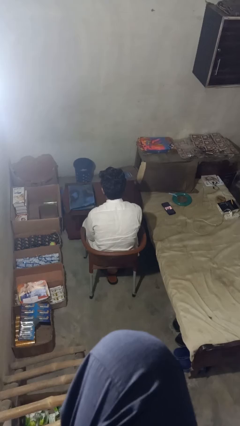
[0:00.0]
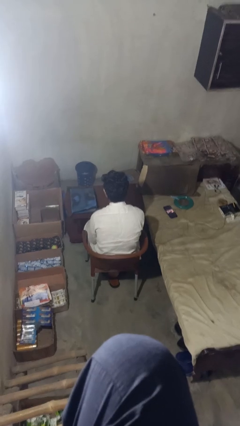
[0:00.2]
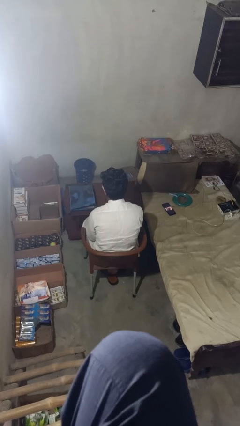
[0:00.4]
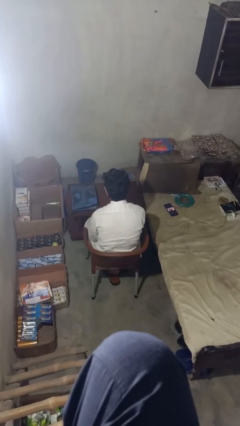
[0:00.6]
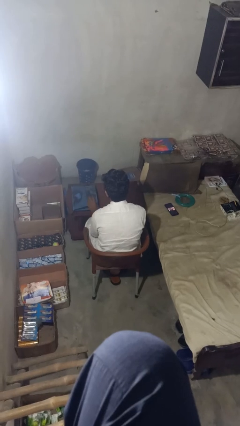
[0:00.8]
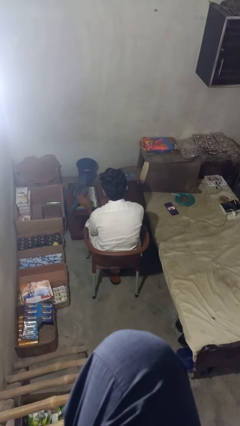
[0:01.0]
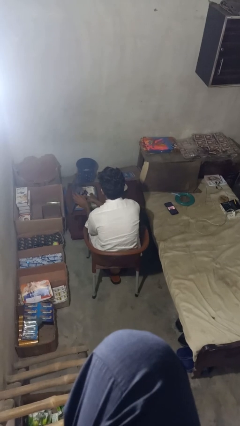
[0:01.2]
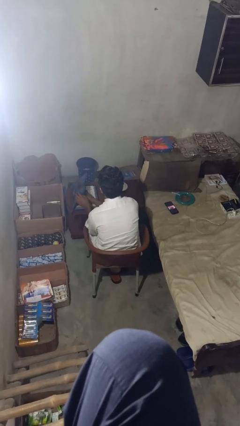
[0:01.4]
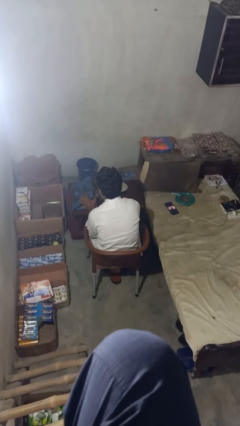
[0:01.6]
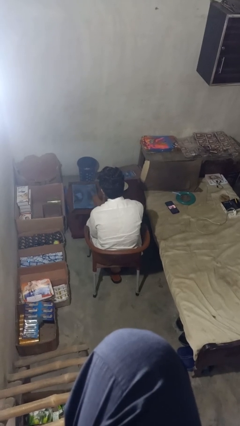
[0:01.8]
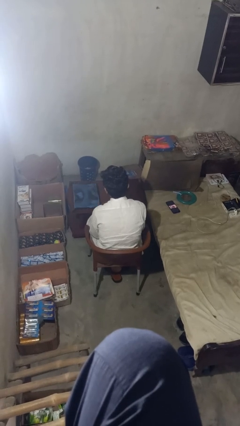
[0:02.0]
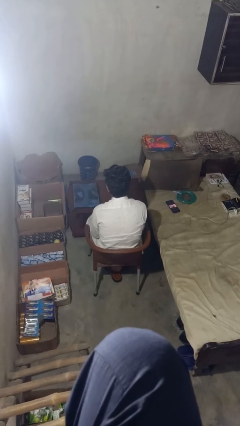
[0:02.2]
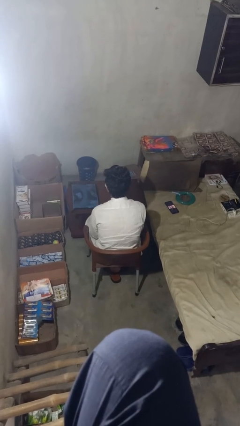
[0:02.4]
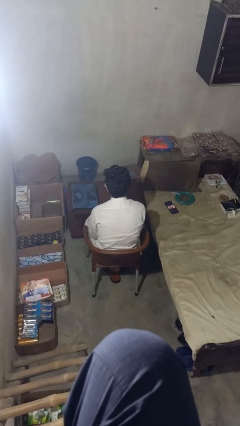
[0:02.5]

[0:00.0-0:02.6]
person puts object into bag

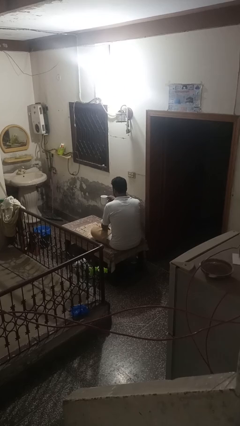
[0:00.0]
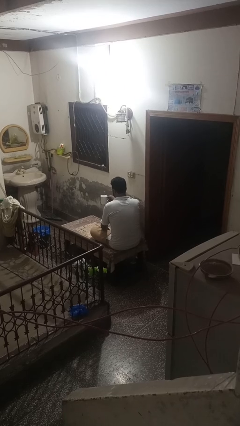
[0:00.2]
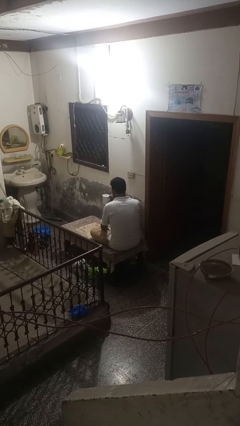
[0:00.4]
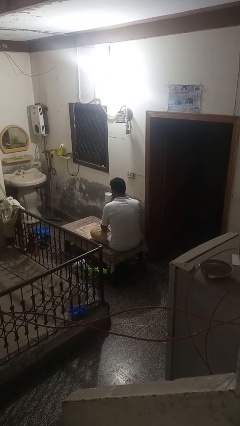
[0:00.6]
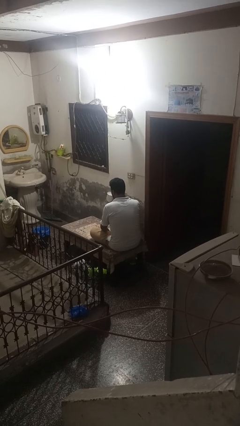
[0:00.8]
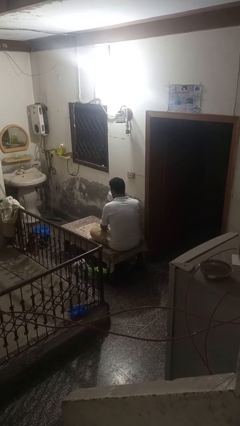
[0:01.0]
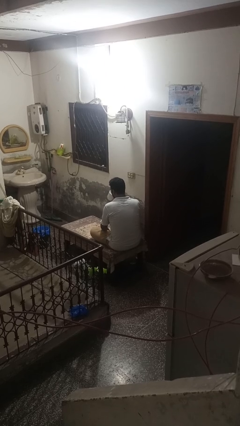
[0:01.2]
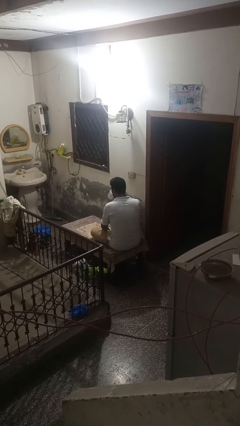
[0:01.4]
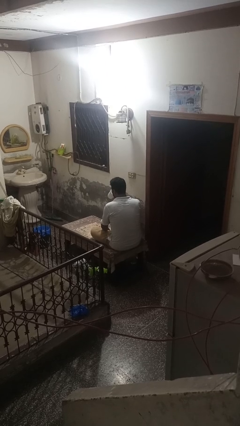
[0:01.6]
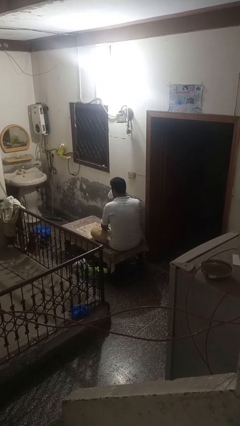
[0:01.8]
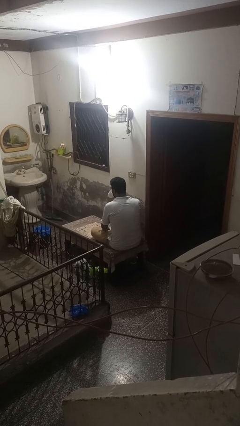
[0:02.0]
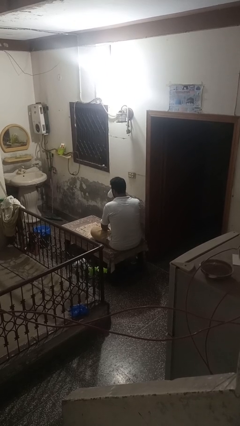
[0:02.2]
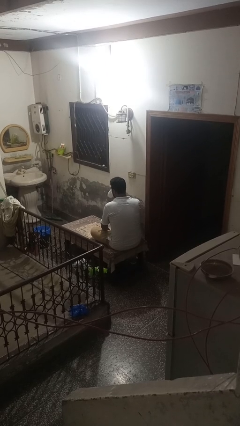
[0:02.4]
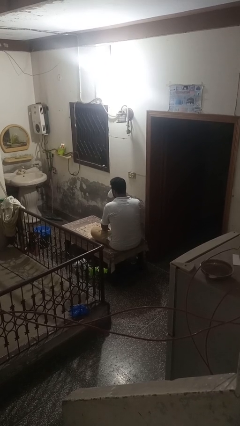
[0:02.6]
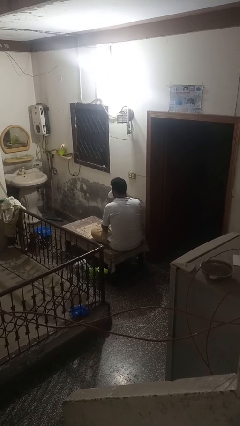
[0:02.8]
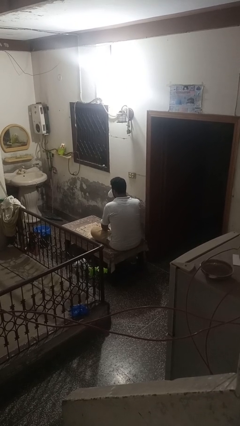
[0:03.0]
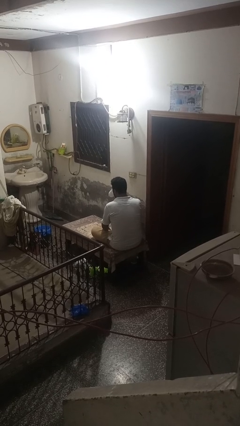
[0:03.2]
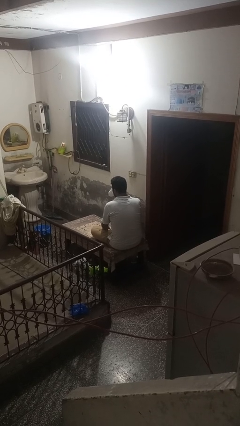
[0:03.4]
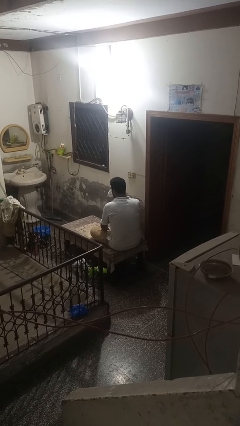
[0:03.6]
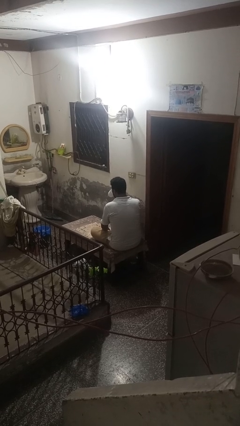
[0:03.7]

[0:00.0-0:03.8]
person drinks from mug

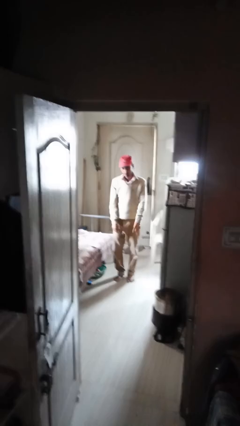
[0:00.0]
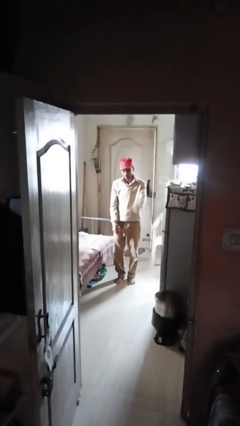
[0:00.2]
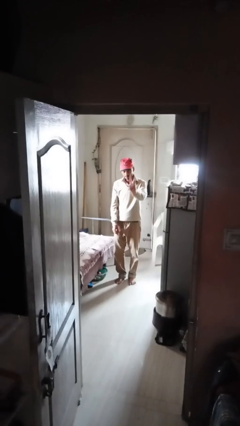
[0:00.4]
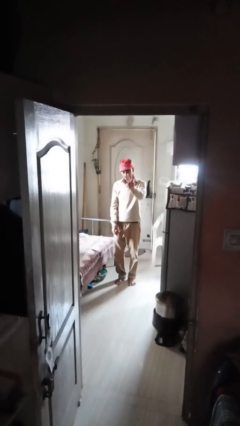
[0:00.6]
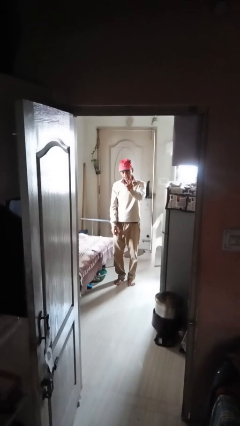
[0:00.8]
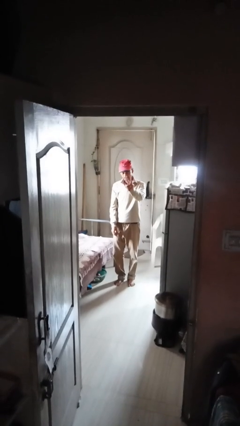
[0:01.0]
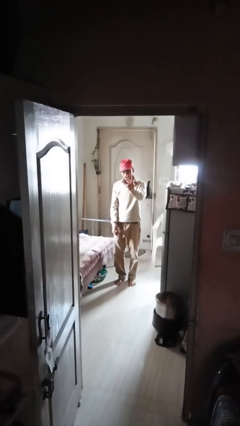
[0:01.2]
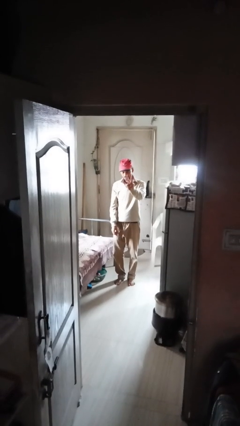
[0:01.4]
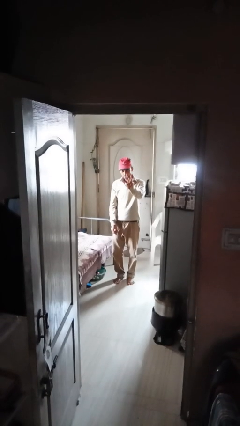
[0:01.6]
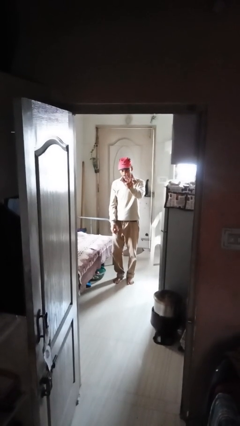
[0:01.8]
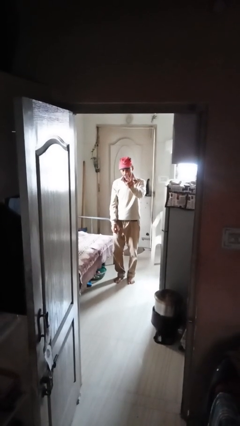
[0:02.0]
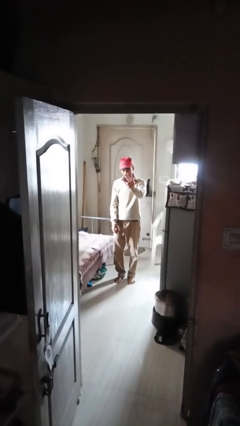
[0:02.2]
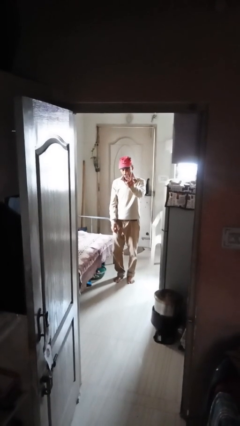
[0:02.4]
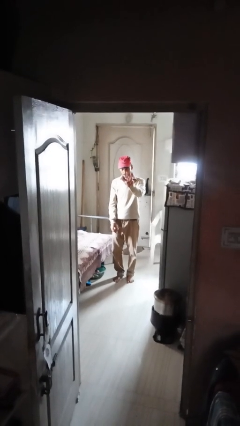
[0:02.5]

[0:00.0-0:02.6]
person gestures peace

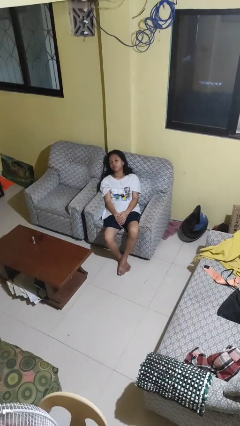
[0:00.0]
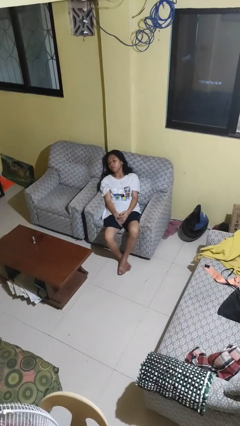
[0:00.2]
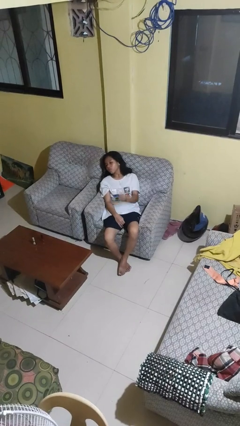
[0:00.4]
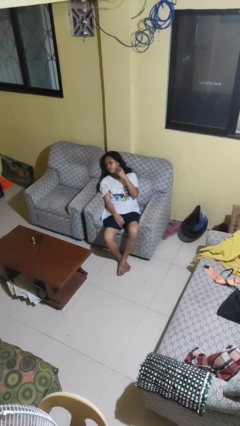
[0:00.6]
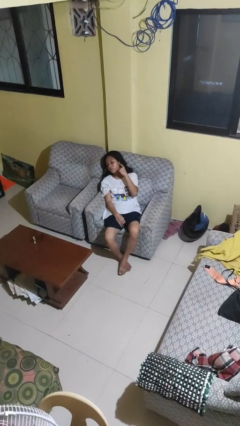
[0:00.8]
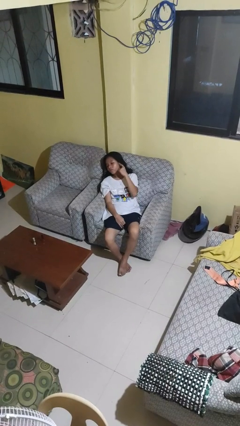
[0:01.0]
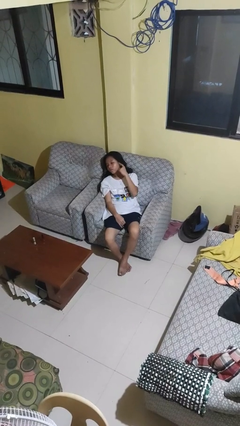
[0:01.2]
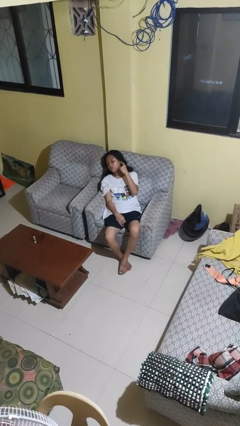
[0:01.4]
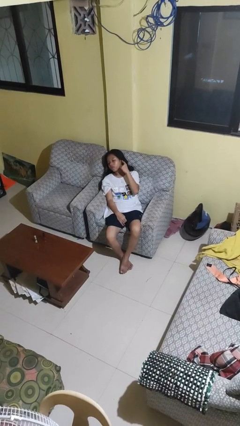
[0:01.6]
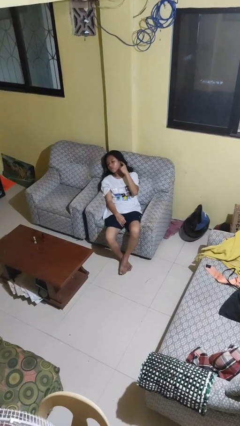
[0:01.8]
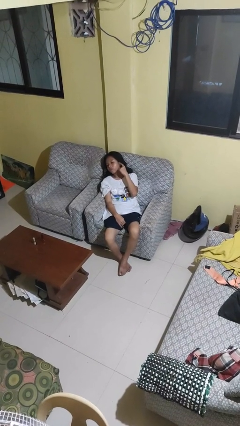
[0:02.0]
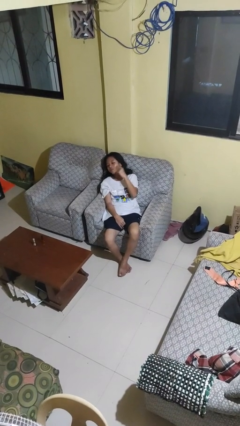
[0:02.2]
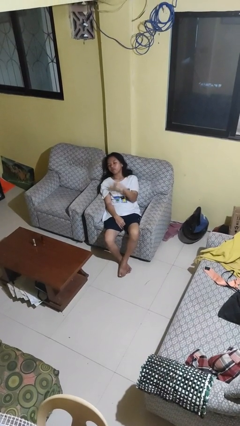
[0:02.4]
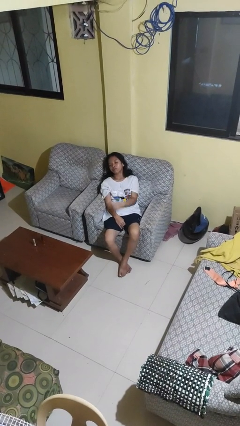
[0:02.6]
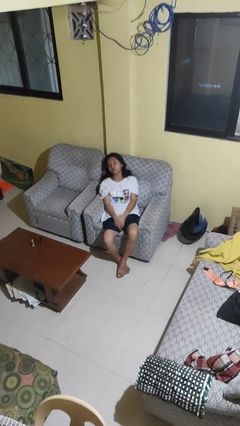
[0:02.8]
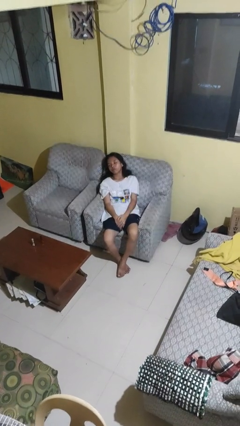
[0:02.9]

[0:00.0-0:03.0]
person gestures listen closely

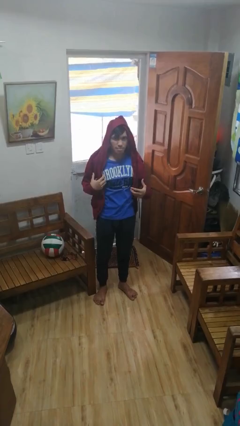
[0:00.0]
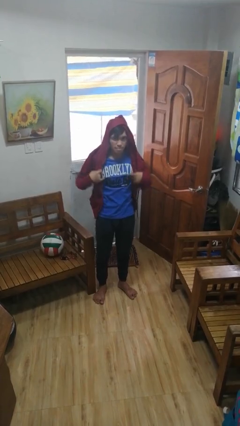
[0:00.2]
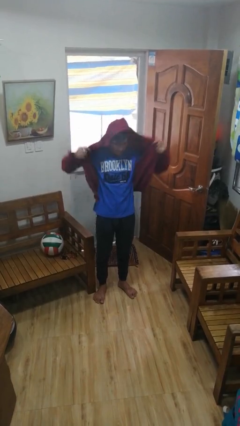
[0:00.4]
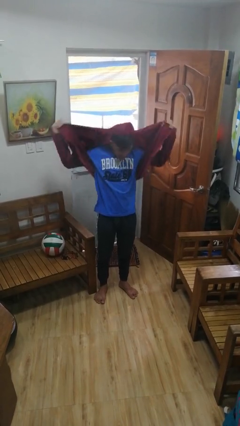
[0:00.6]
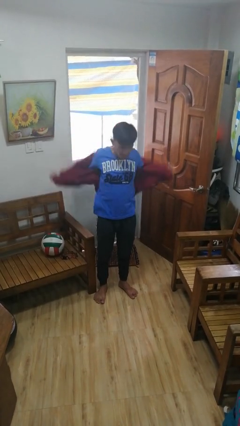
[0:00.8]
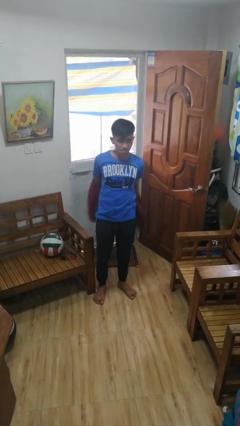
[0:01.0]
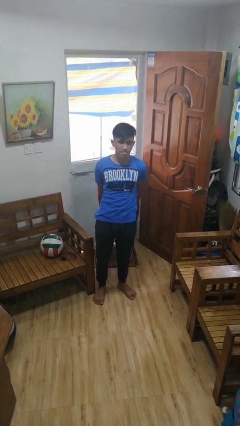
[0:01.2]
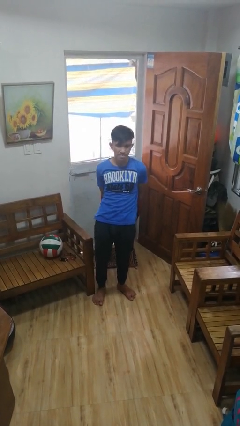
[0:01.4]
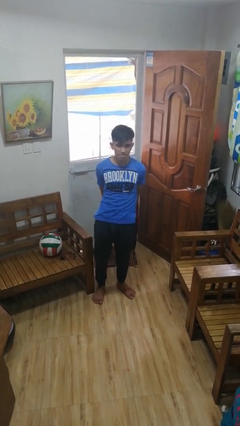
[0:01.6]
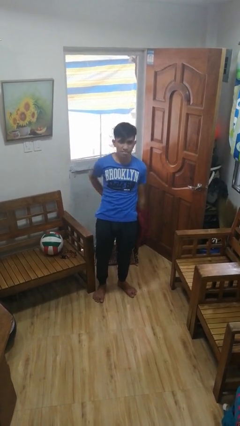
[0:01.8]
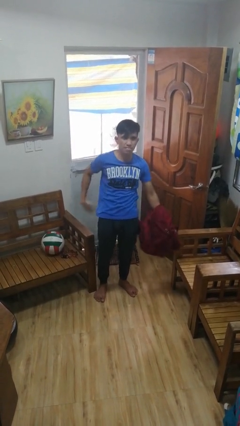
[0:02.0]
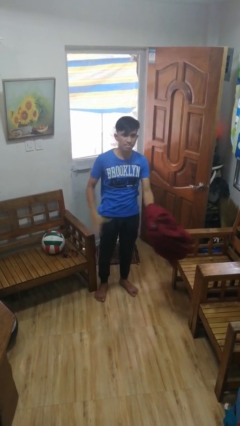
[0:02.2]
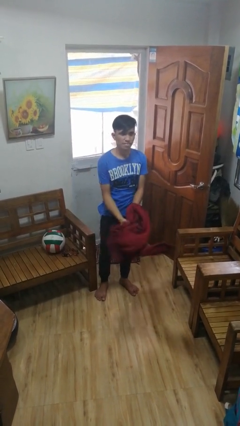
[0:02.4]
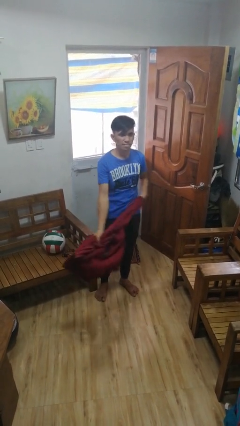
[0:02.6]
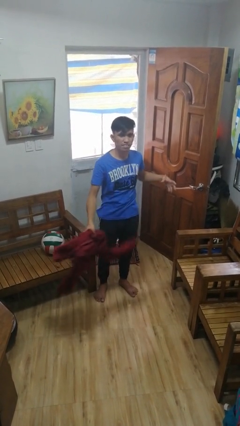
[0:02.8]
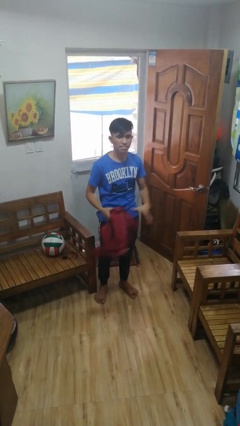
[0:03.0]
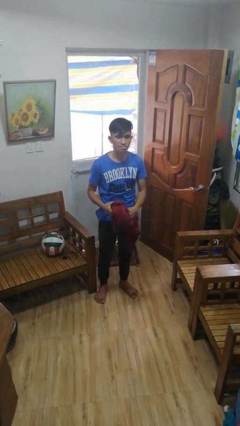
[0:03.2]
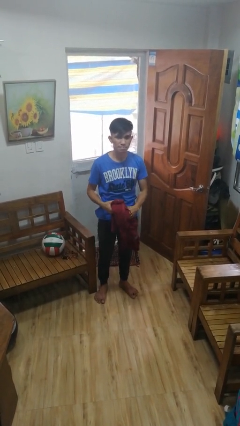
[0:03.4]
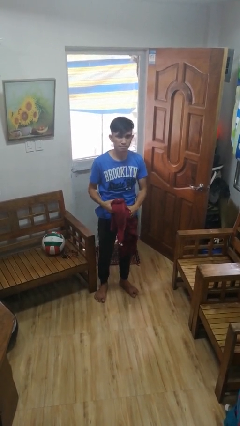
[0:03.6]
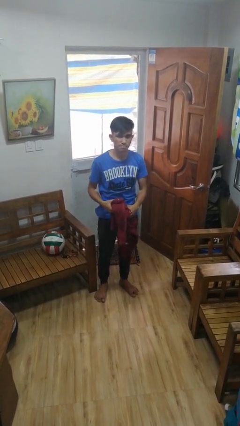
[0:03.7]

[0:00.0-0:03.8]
person takes off hoodie

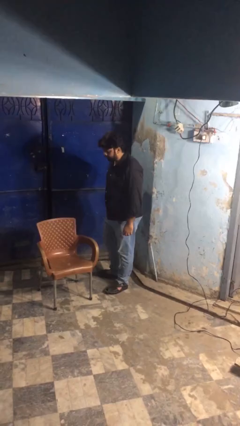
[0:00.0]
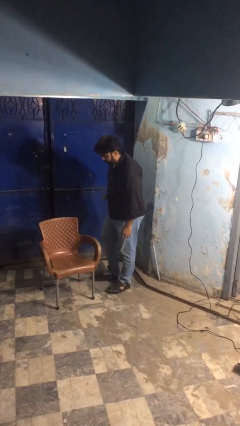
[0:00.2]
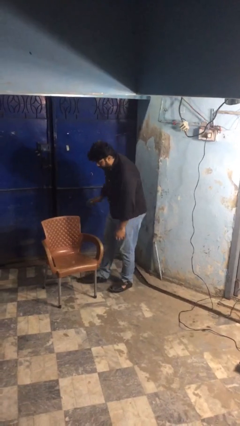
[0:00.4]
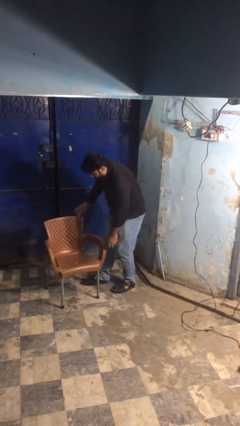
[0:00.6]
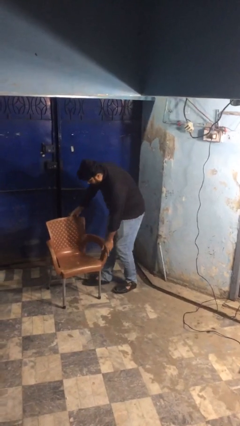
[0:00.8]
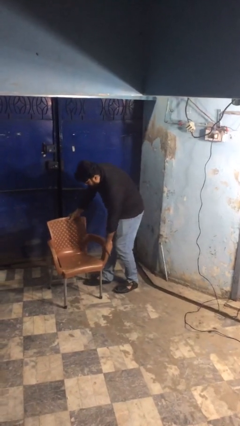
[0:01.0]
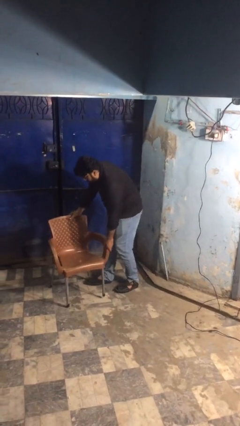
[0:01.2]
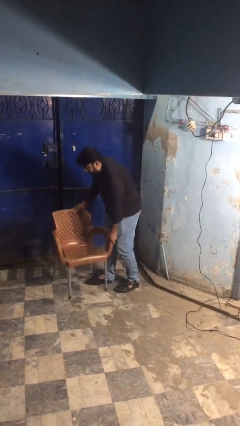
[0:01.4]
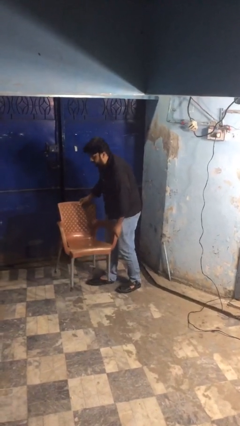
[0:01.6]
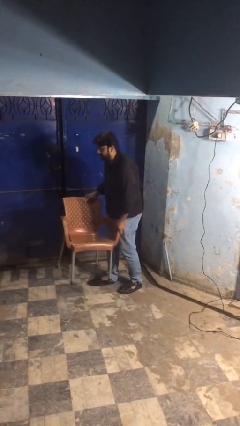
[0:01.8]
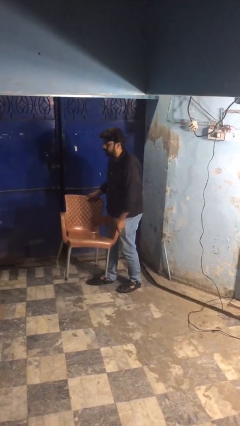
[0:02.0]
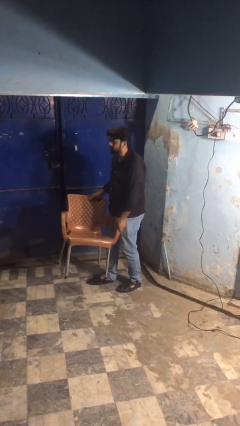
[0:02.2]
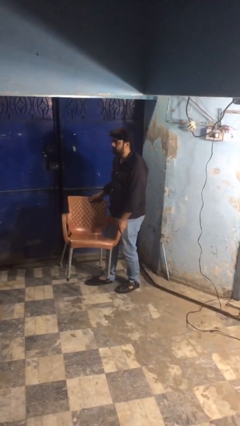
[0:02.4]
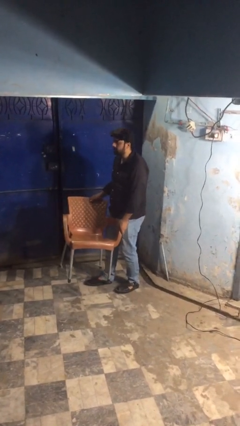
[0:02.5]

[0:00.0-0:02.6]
person picks up object from floor
